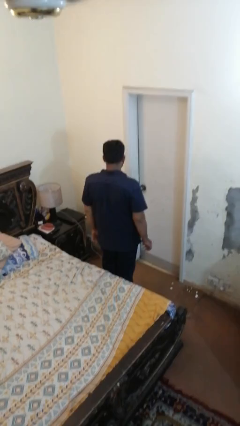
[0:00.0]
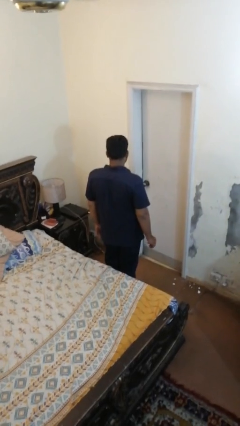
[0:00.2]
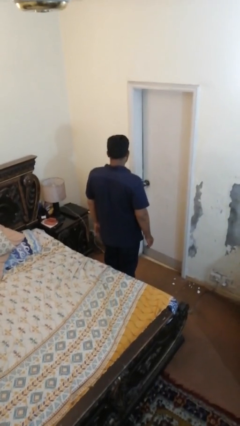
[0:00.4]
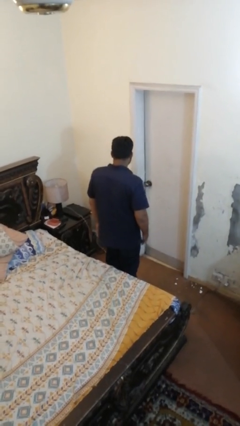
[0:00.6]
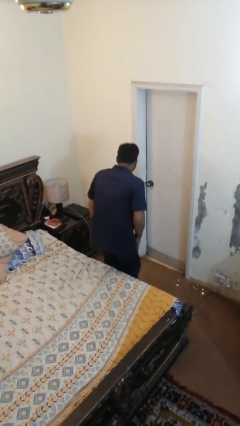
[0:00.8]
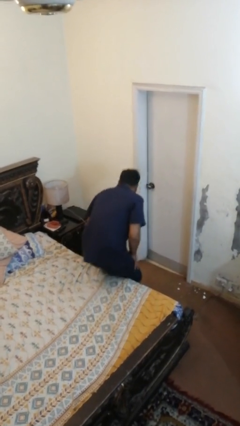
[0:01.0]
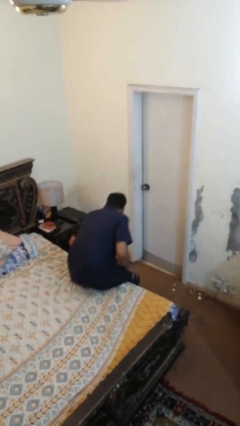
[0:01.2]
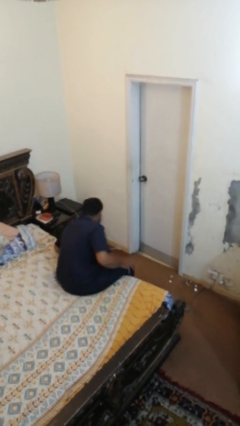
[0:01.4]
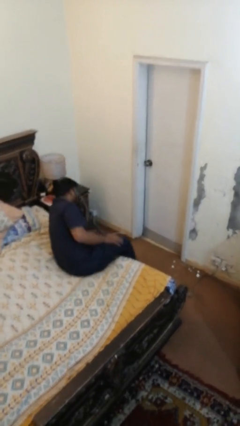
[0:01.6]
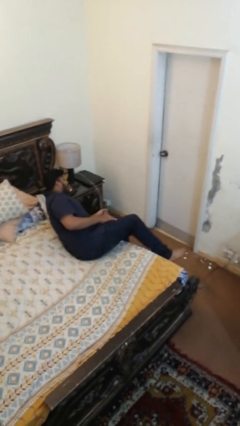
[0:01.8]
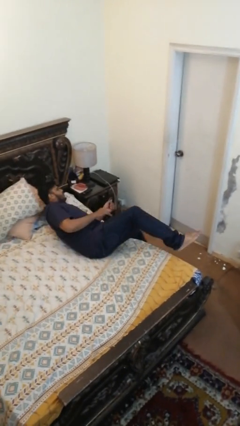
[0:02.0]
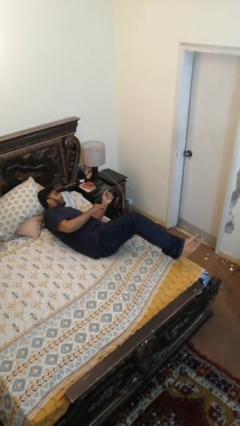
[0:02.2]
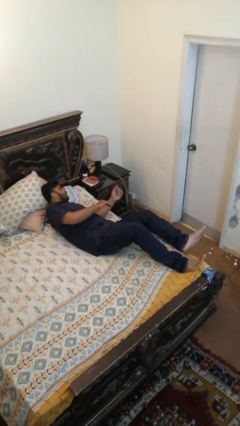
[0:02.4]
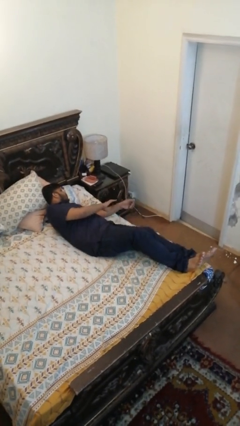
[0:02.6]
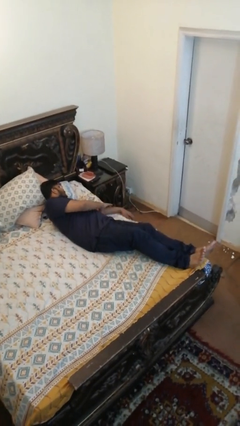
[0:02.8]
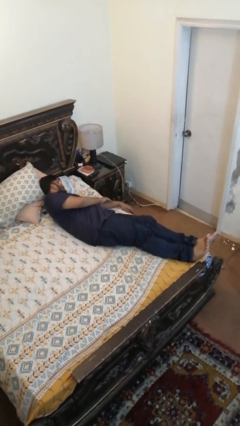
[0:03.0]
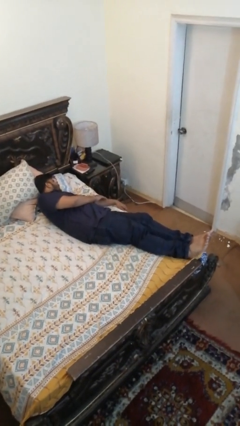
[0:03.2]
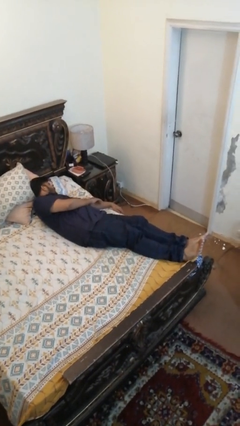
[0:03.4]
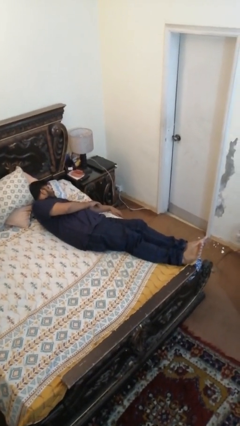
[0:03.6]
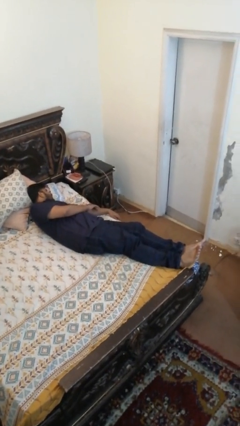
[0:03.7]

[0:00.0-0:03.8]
person lies down on bed

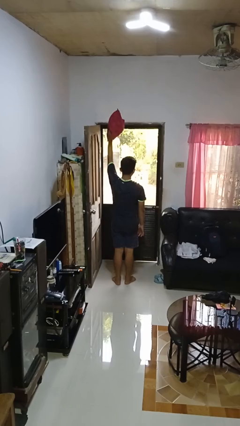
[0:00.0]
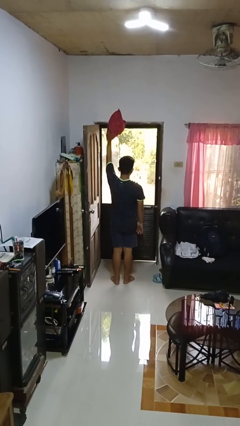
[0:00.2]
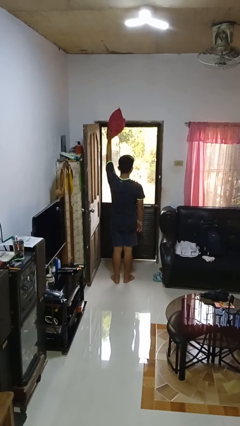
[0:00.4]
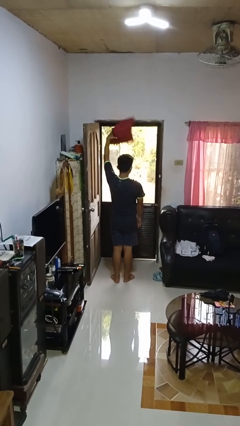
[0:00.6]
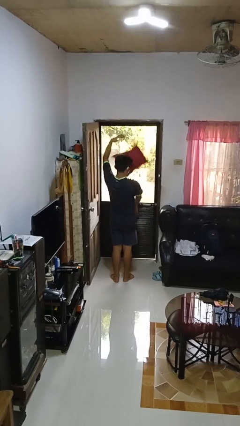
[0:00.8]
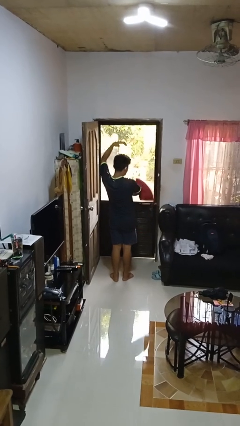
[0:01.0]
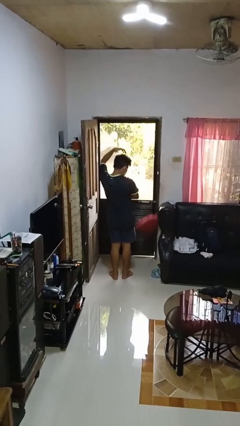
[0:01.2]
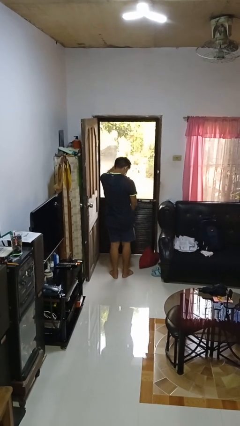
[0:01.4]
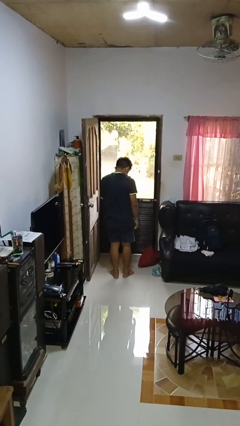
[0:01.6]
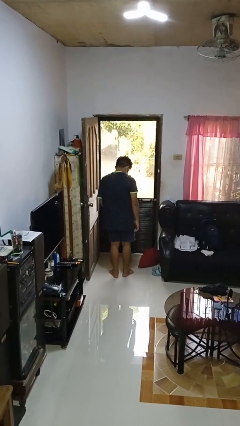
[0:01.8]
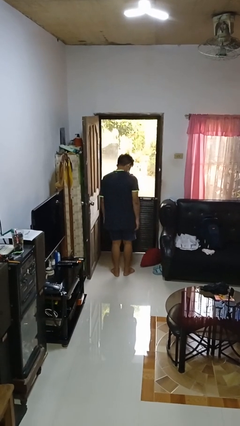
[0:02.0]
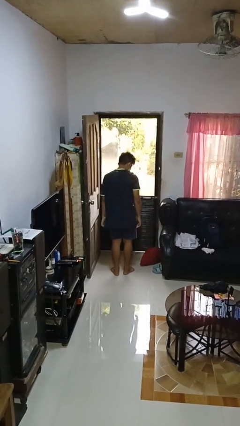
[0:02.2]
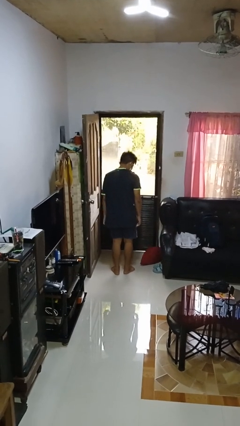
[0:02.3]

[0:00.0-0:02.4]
person drops object

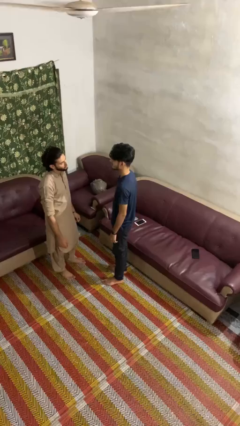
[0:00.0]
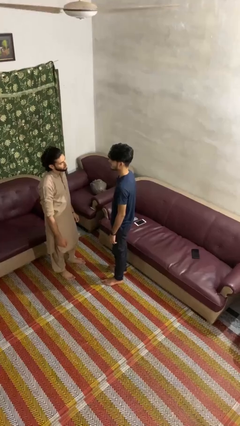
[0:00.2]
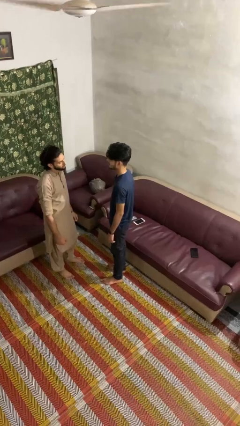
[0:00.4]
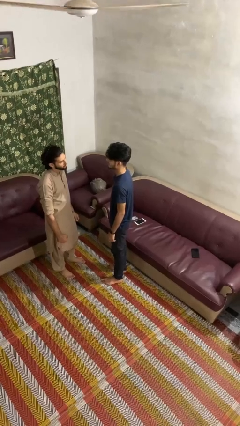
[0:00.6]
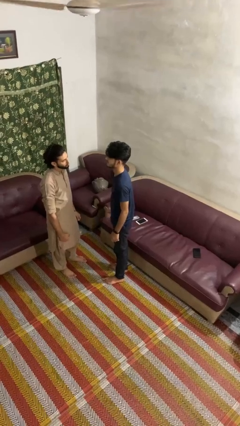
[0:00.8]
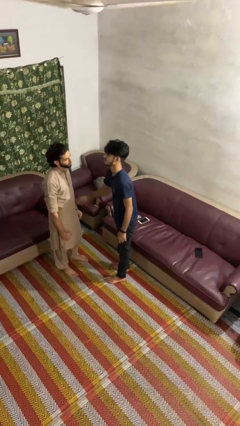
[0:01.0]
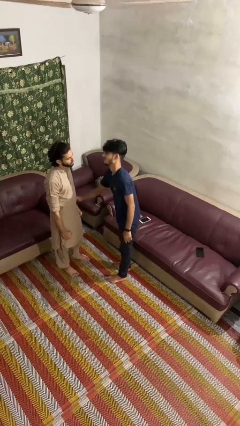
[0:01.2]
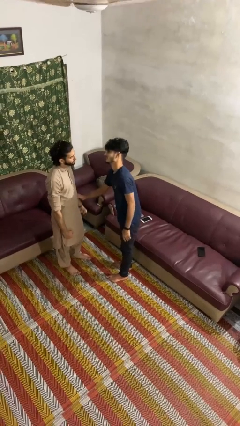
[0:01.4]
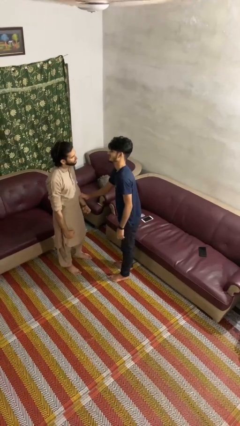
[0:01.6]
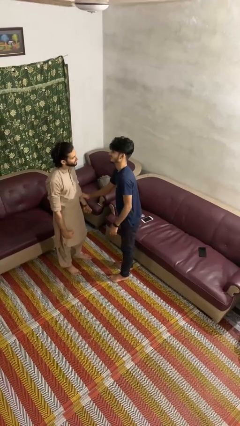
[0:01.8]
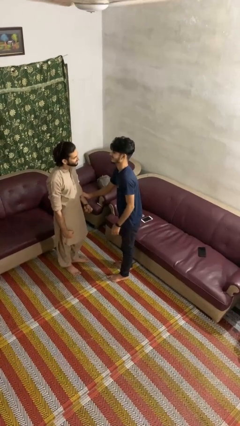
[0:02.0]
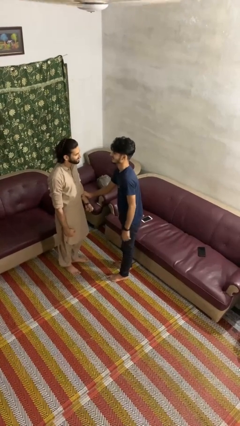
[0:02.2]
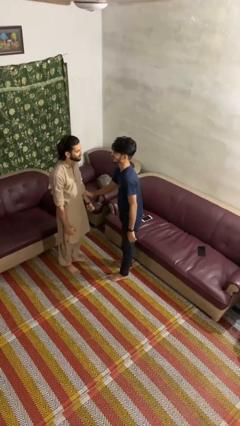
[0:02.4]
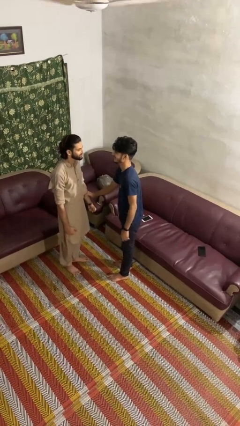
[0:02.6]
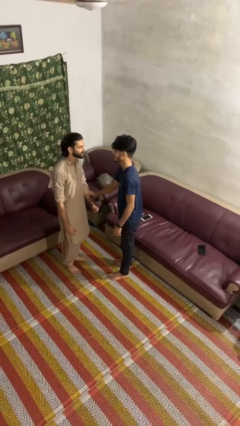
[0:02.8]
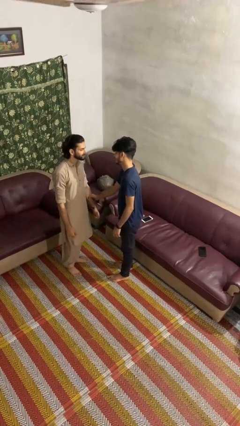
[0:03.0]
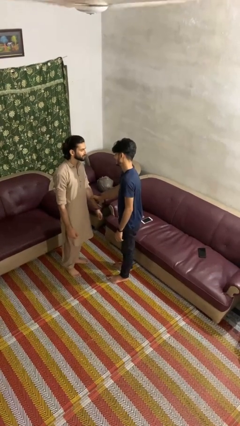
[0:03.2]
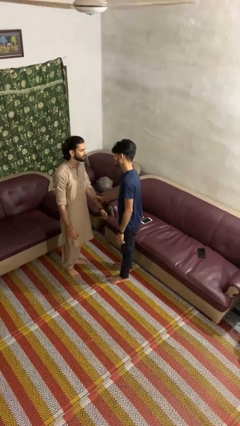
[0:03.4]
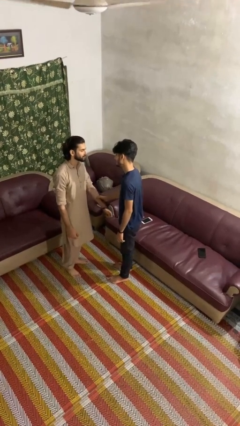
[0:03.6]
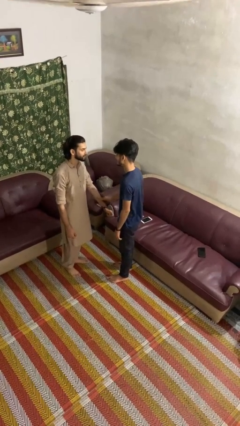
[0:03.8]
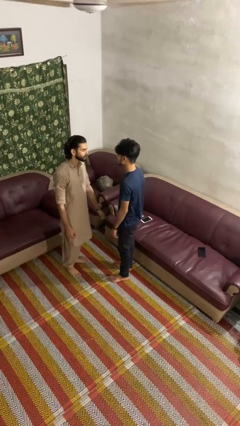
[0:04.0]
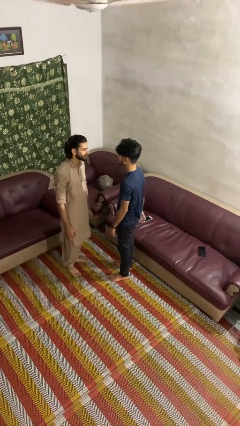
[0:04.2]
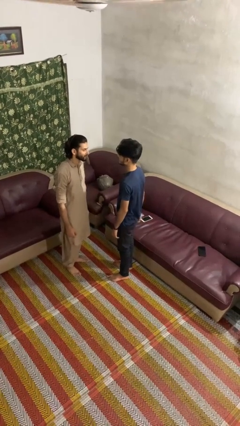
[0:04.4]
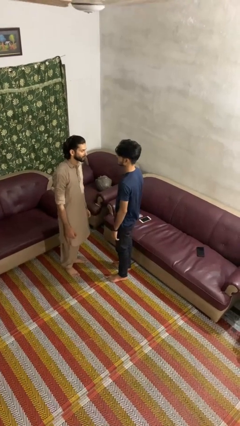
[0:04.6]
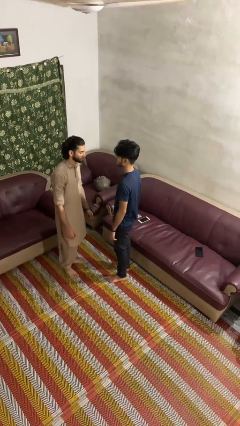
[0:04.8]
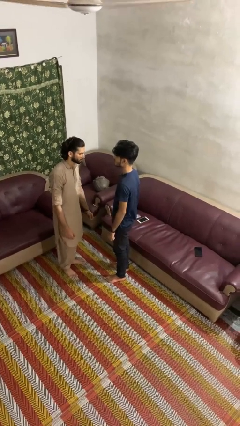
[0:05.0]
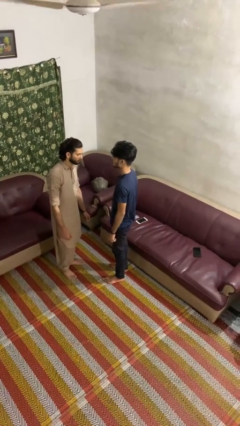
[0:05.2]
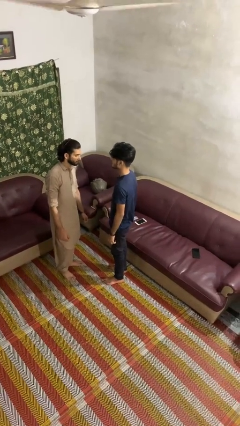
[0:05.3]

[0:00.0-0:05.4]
person grabs person by forearm

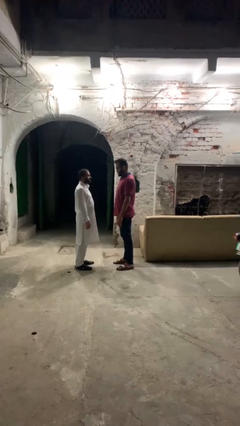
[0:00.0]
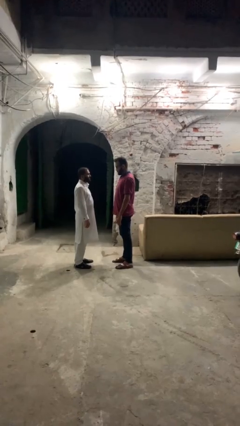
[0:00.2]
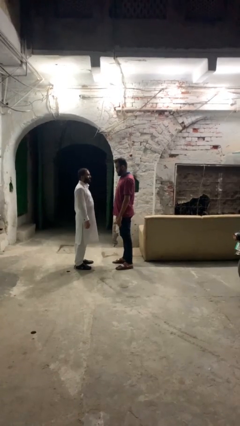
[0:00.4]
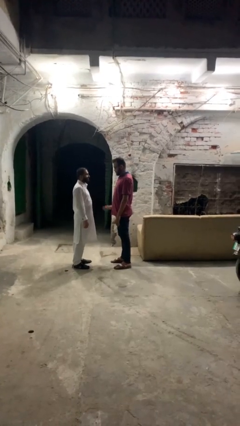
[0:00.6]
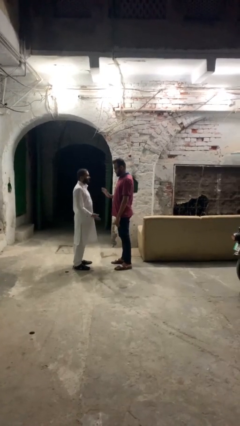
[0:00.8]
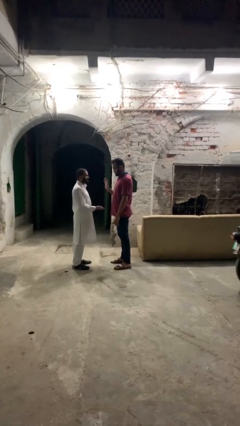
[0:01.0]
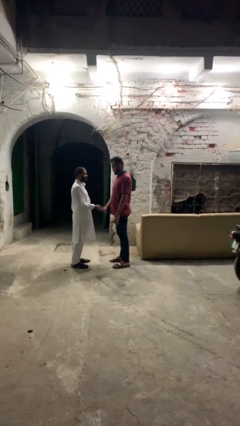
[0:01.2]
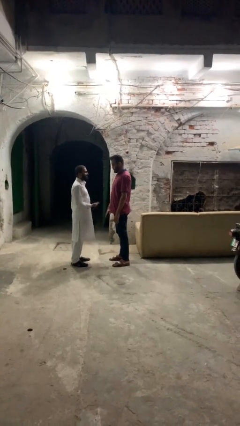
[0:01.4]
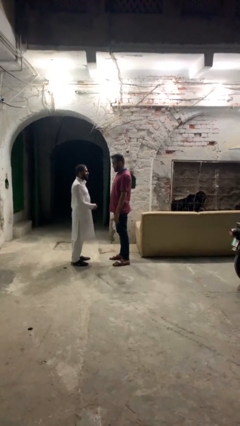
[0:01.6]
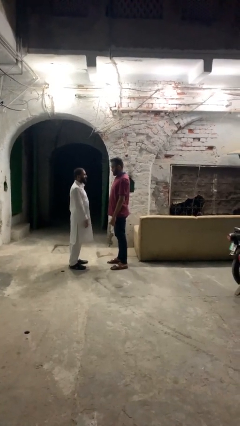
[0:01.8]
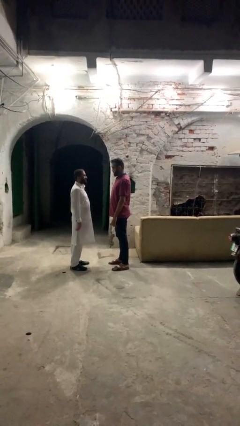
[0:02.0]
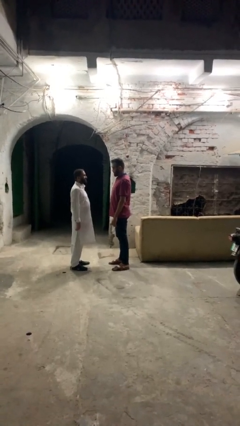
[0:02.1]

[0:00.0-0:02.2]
person highfives hand

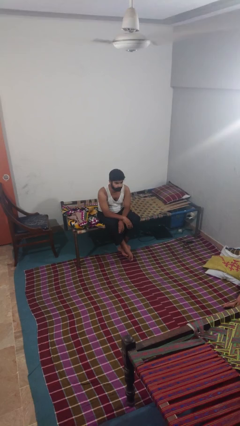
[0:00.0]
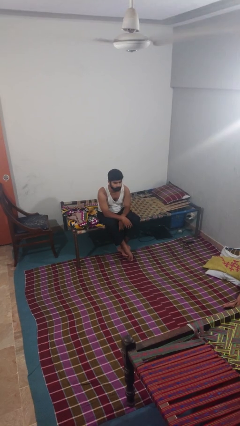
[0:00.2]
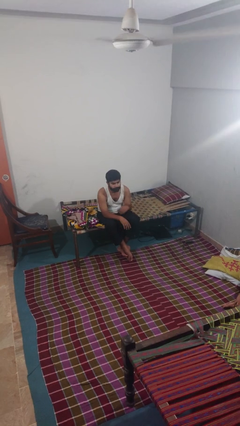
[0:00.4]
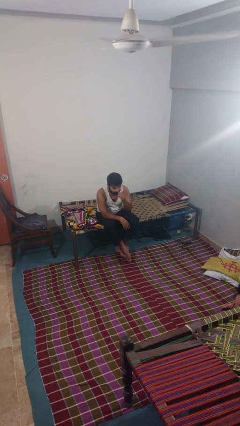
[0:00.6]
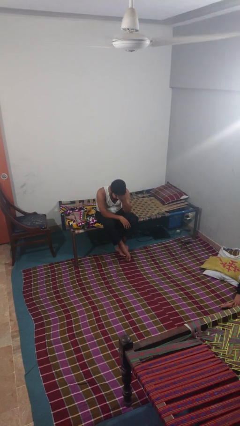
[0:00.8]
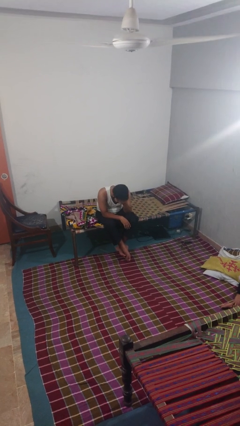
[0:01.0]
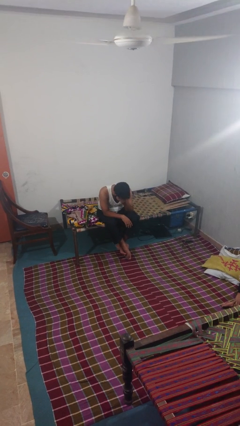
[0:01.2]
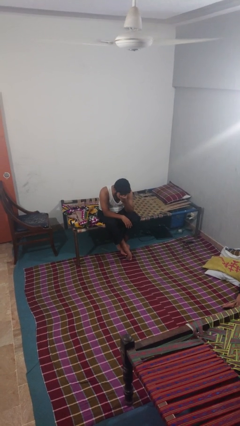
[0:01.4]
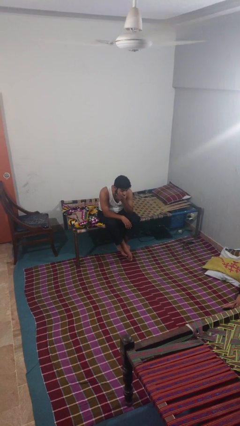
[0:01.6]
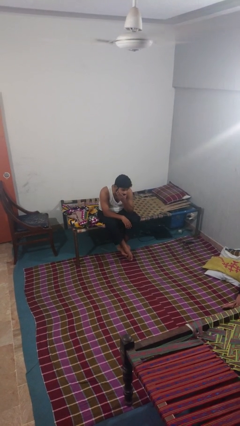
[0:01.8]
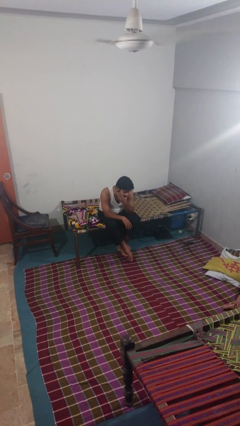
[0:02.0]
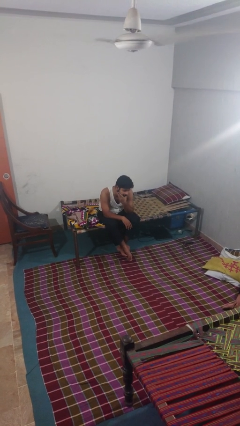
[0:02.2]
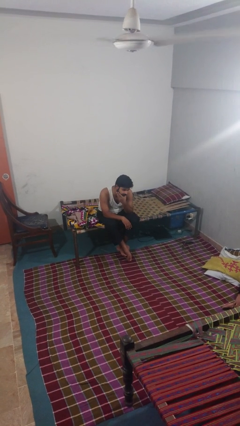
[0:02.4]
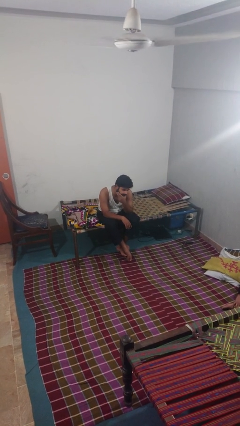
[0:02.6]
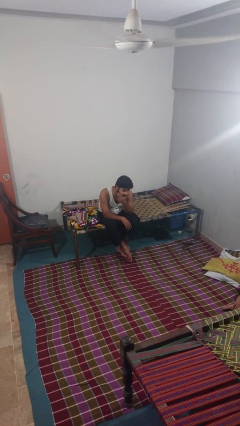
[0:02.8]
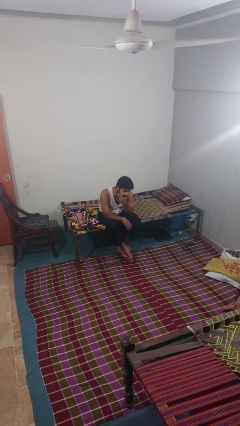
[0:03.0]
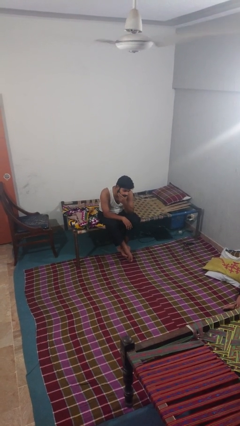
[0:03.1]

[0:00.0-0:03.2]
person covers face with hands

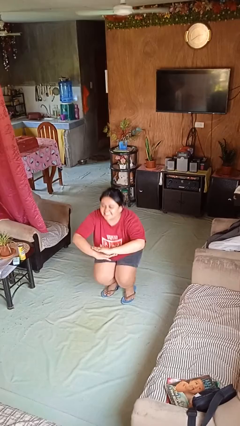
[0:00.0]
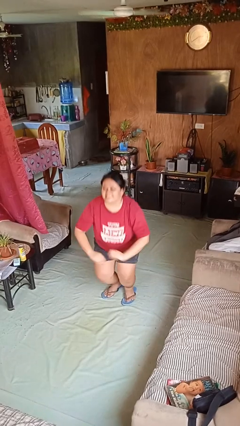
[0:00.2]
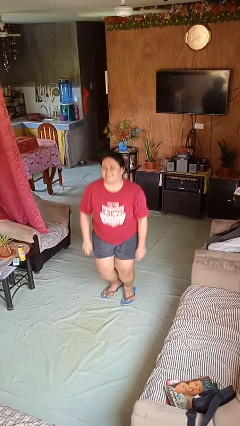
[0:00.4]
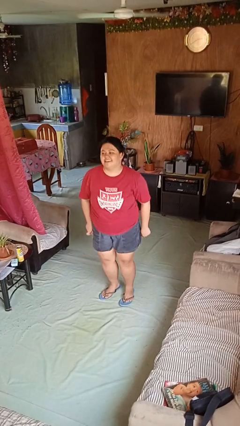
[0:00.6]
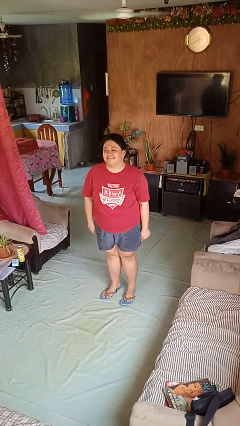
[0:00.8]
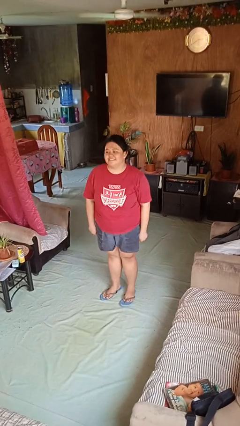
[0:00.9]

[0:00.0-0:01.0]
person stands up
